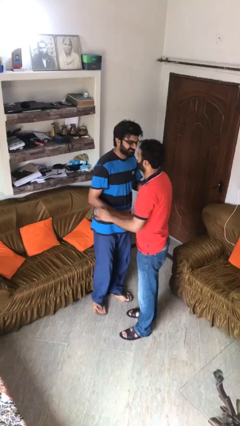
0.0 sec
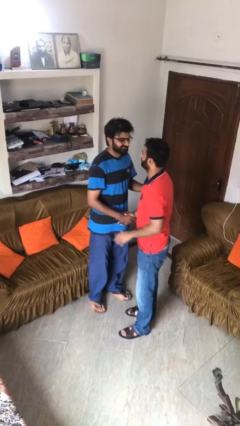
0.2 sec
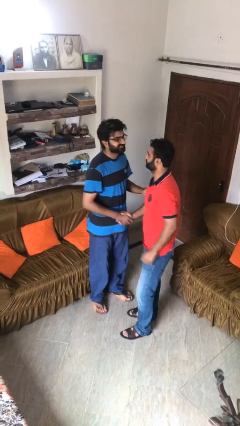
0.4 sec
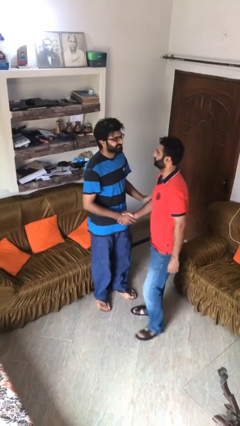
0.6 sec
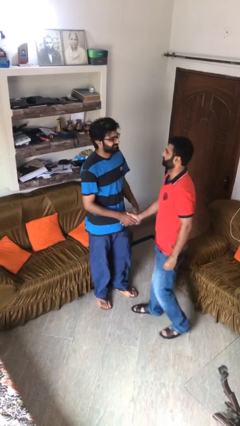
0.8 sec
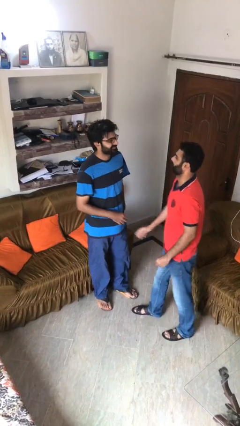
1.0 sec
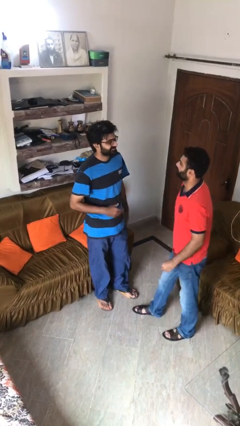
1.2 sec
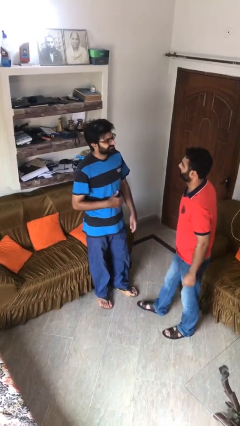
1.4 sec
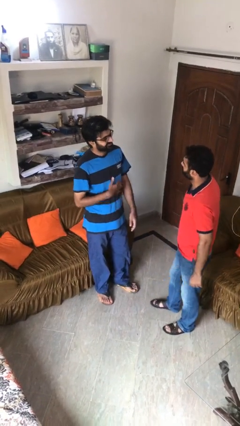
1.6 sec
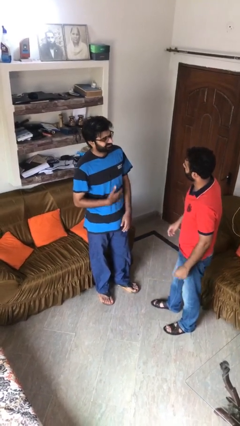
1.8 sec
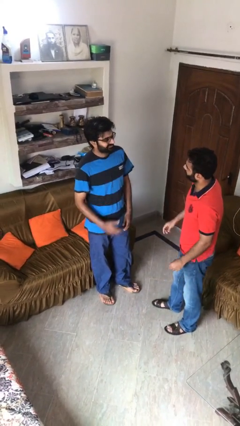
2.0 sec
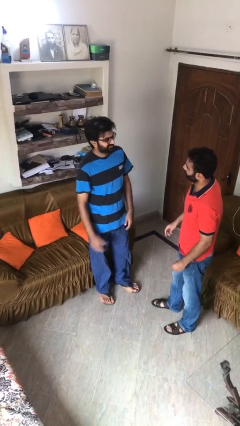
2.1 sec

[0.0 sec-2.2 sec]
person talks to person

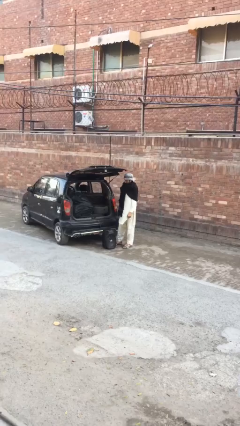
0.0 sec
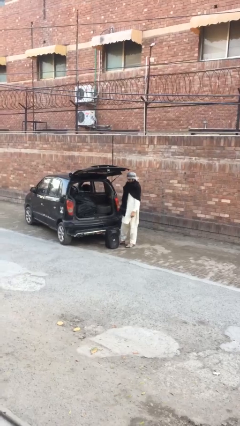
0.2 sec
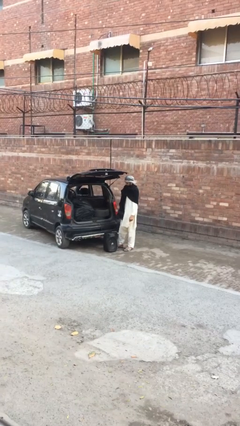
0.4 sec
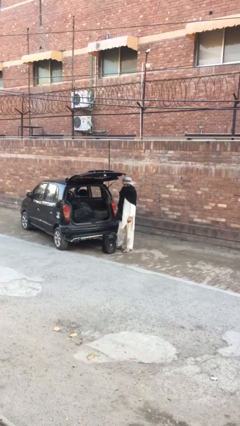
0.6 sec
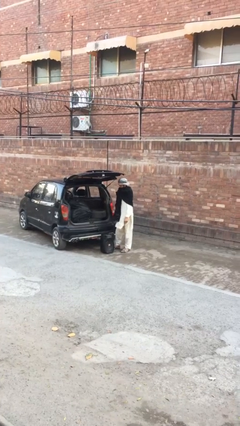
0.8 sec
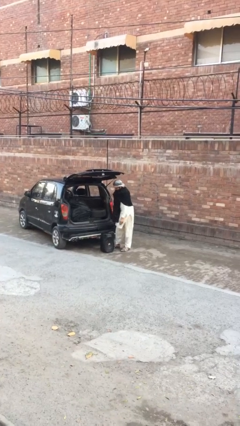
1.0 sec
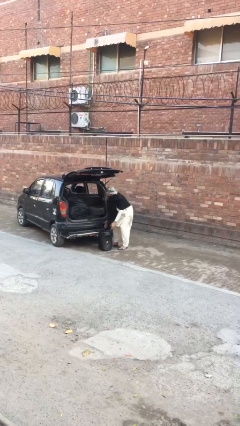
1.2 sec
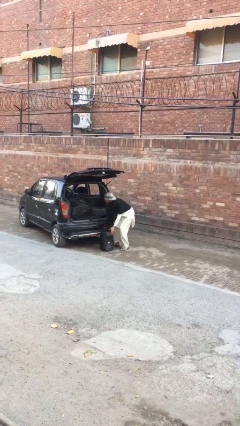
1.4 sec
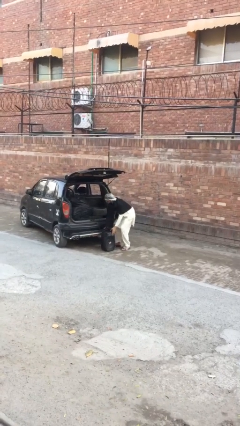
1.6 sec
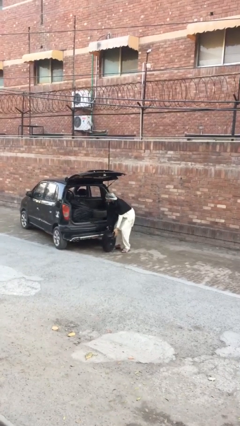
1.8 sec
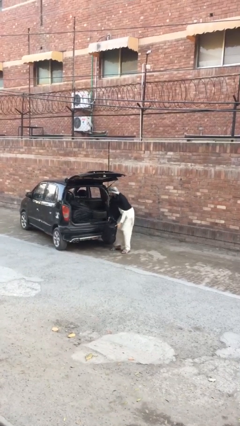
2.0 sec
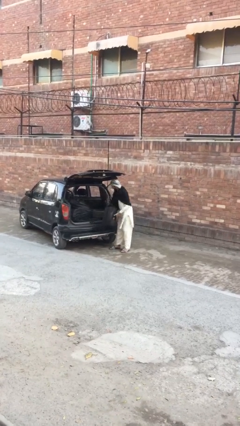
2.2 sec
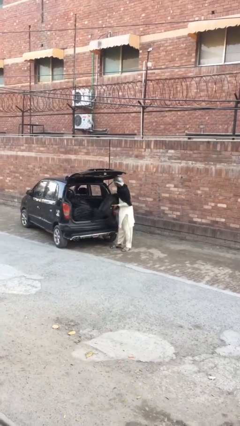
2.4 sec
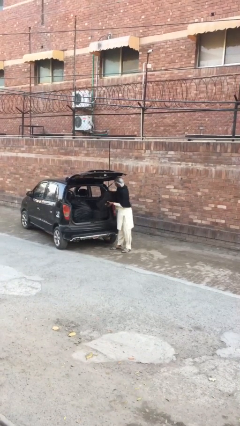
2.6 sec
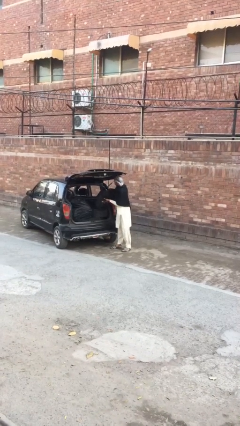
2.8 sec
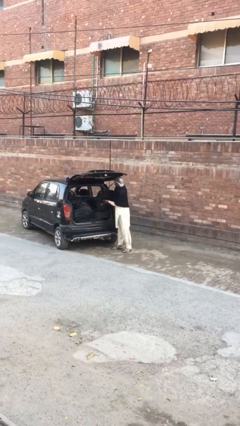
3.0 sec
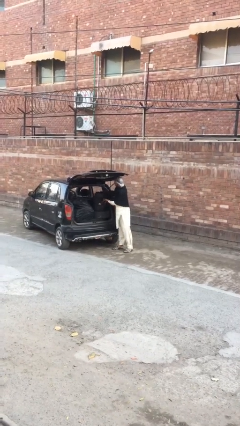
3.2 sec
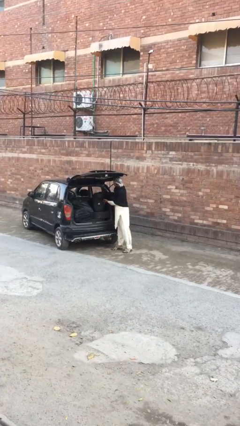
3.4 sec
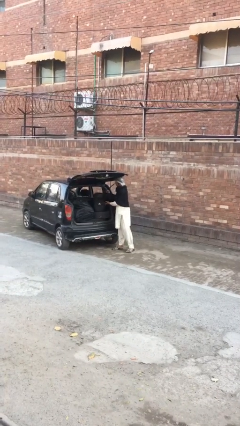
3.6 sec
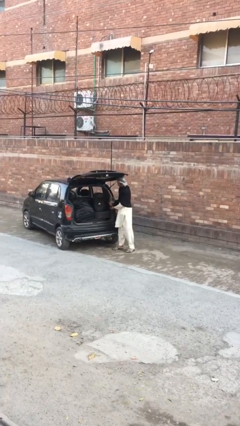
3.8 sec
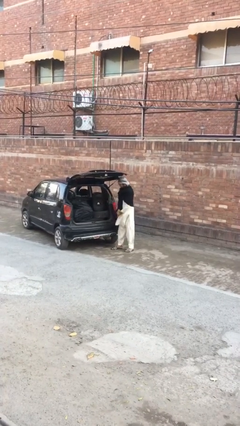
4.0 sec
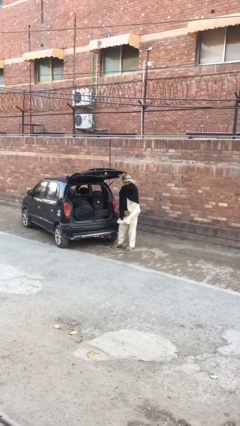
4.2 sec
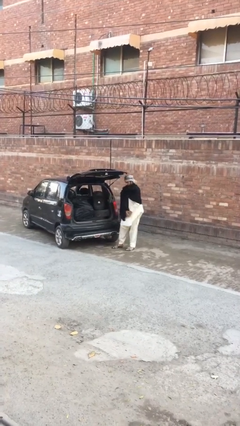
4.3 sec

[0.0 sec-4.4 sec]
person loads car

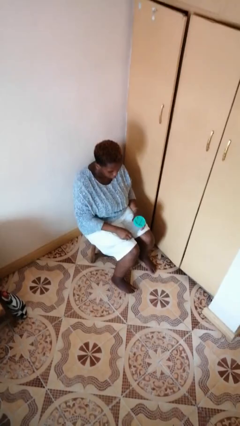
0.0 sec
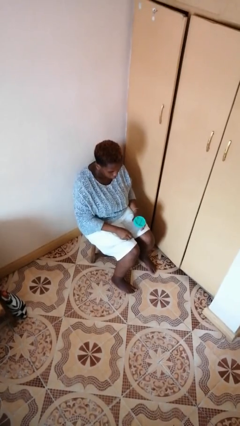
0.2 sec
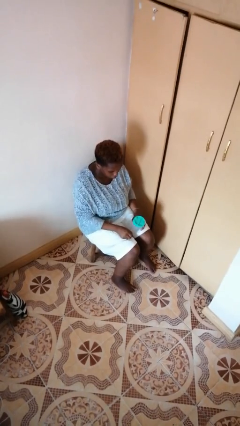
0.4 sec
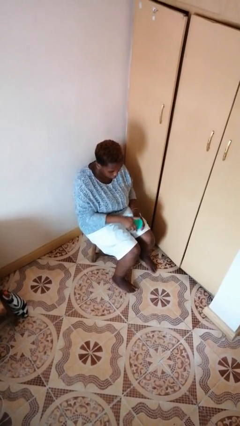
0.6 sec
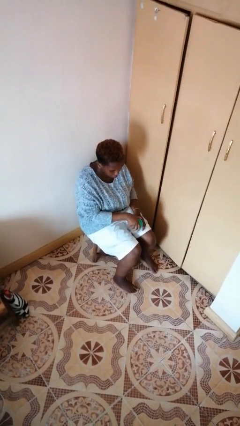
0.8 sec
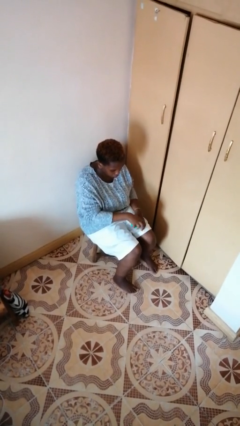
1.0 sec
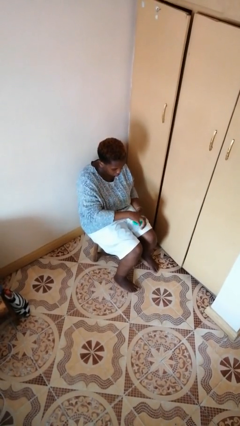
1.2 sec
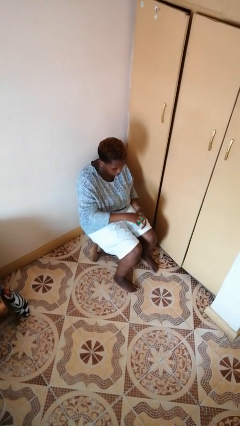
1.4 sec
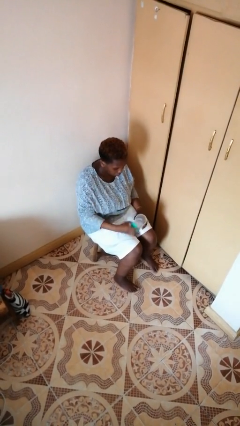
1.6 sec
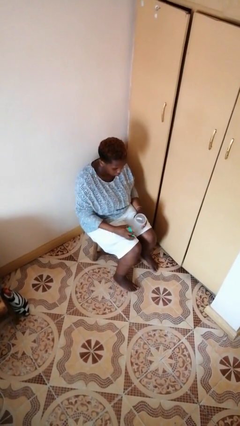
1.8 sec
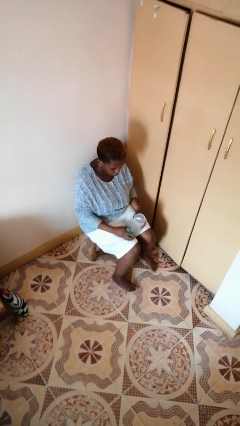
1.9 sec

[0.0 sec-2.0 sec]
person opens jar

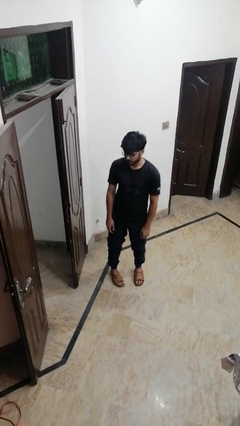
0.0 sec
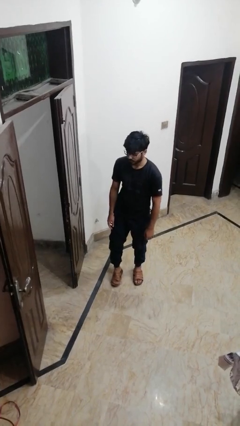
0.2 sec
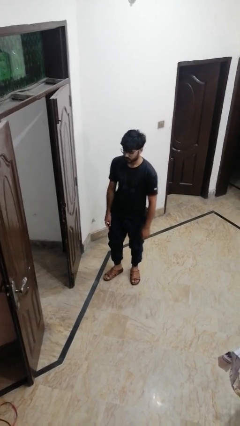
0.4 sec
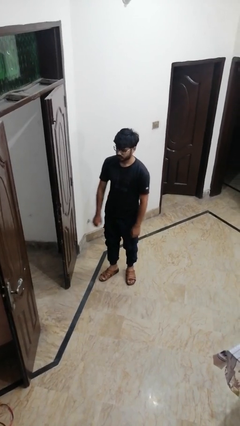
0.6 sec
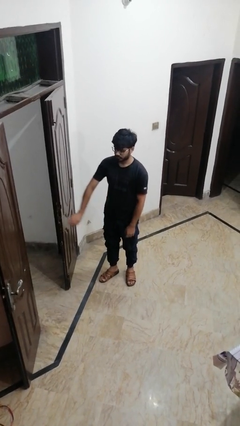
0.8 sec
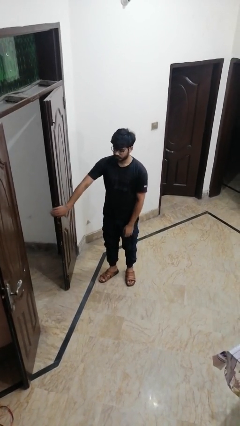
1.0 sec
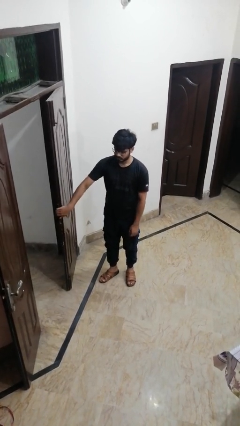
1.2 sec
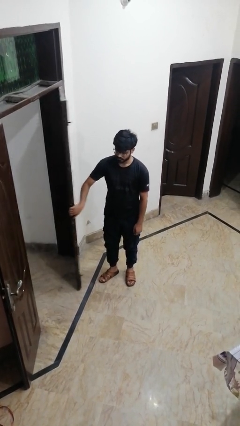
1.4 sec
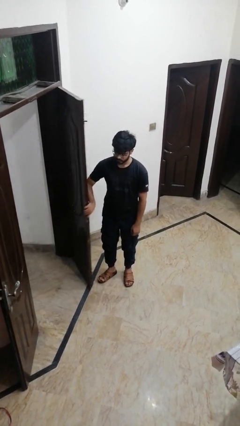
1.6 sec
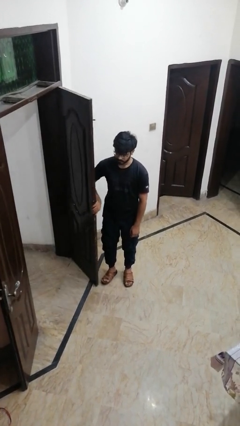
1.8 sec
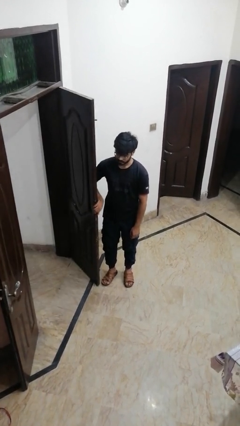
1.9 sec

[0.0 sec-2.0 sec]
person opens facility door

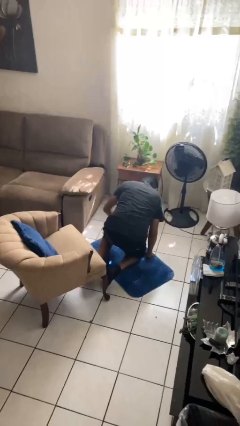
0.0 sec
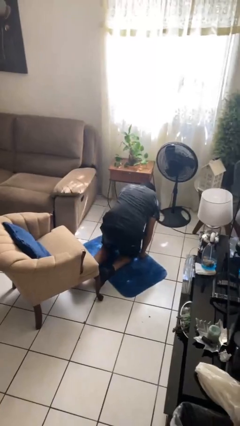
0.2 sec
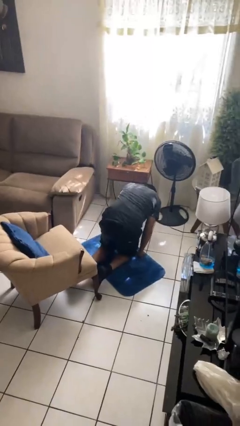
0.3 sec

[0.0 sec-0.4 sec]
person falls from chair

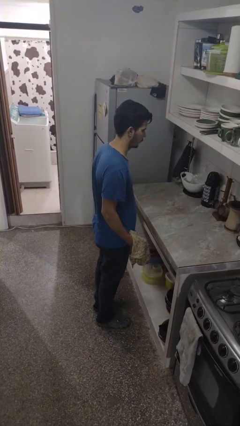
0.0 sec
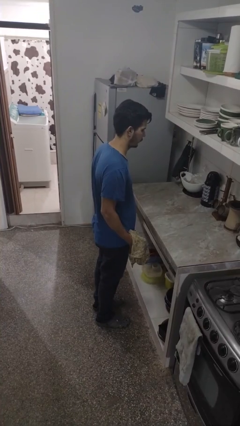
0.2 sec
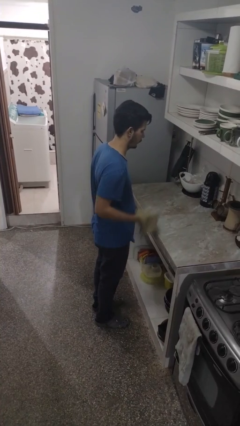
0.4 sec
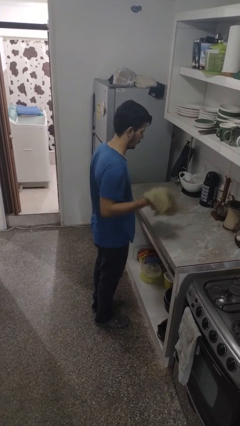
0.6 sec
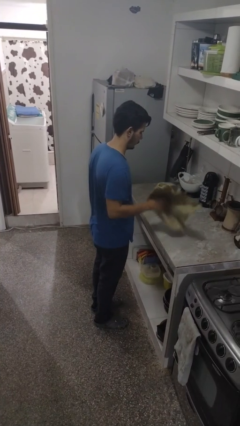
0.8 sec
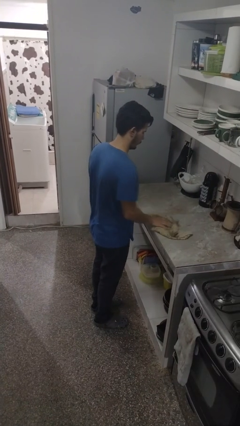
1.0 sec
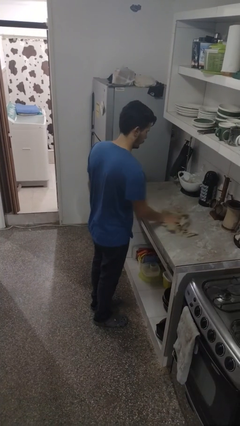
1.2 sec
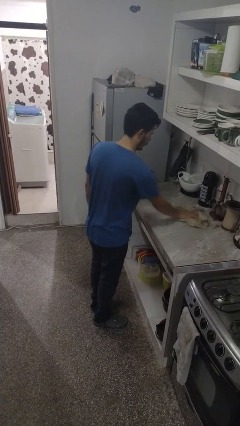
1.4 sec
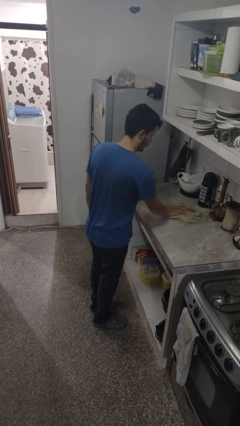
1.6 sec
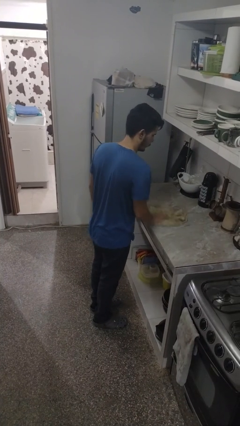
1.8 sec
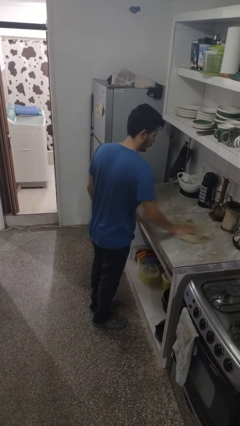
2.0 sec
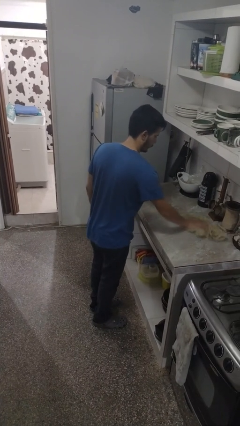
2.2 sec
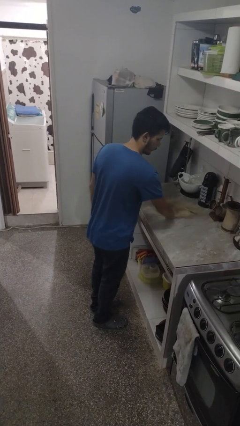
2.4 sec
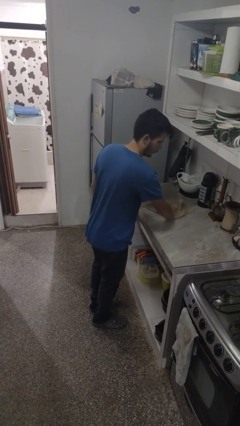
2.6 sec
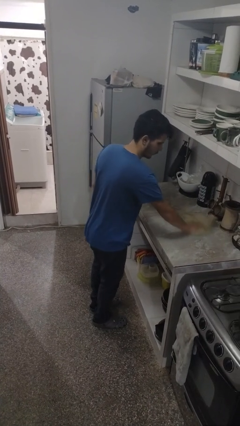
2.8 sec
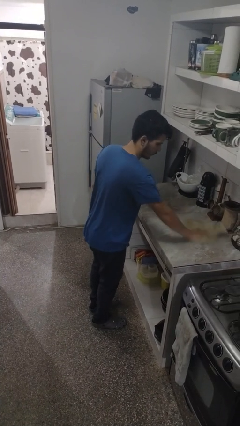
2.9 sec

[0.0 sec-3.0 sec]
person cleans table with rag

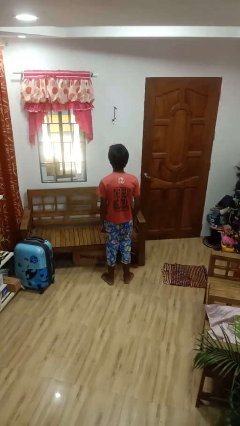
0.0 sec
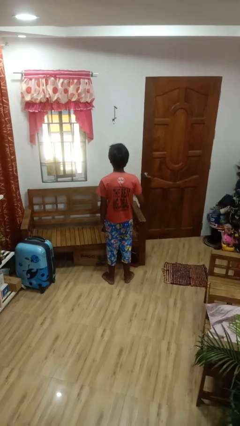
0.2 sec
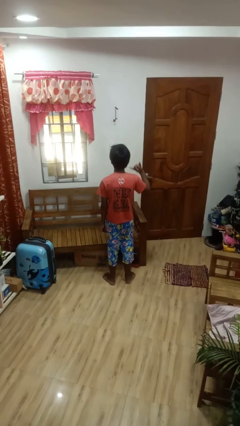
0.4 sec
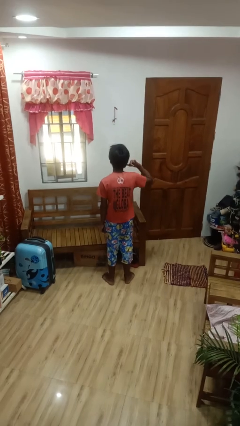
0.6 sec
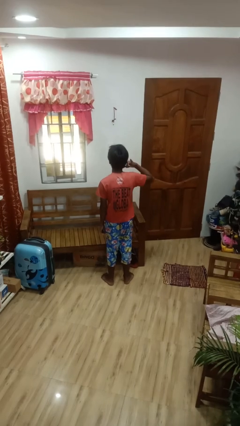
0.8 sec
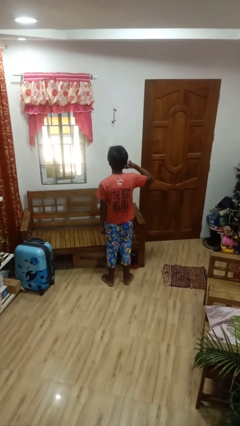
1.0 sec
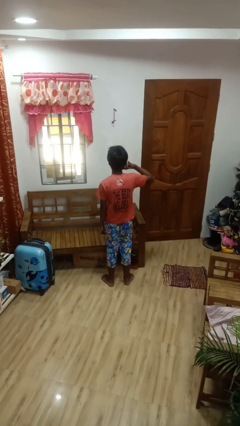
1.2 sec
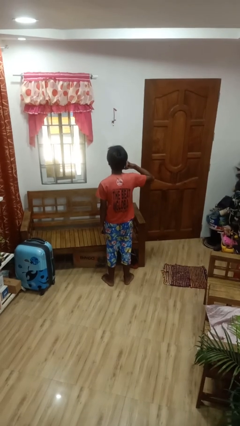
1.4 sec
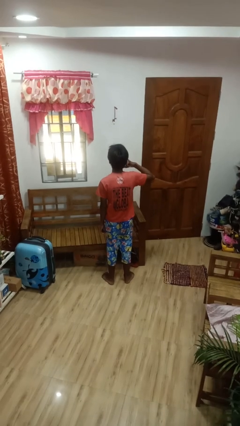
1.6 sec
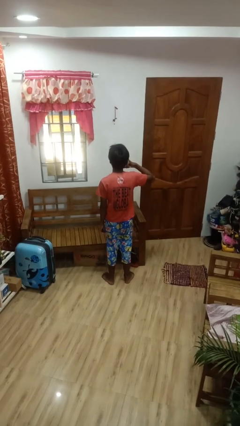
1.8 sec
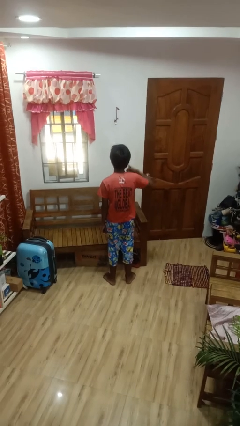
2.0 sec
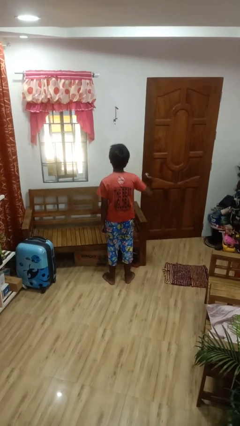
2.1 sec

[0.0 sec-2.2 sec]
person gestures call me

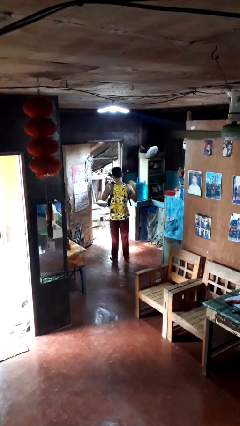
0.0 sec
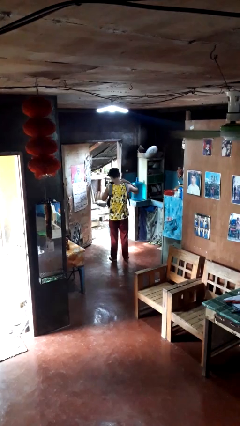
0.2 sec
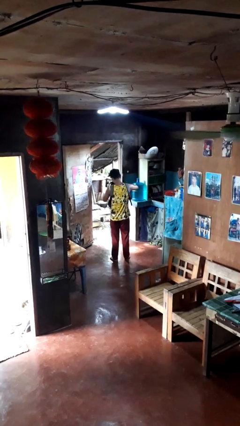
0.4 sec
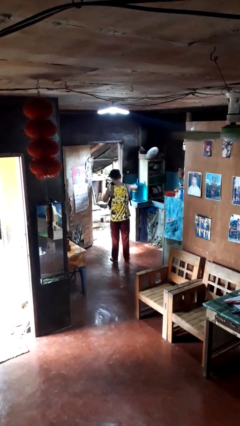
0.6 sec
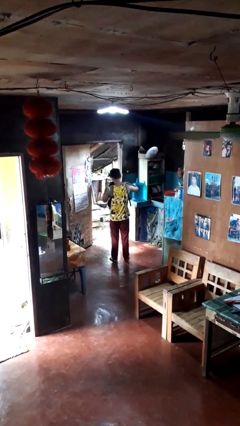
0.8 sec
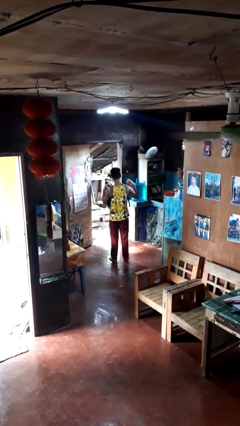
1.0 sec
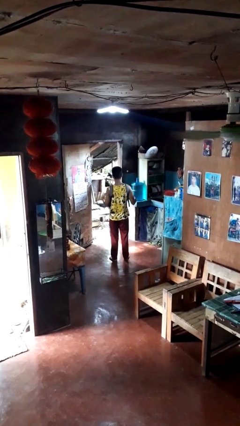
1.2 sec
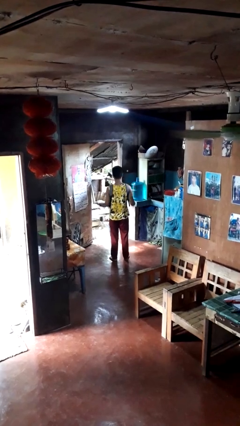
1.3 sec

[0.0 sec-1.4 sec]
person puts object into backpack
